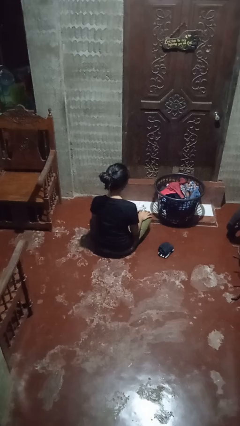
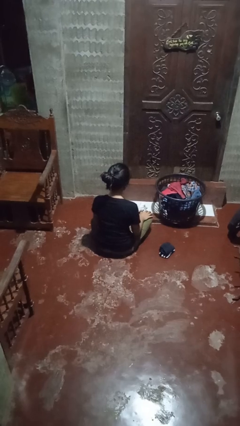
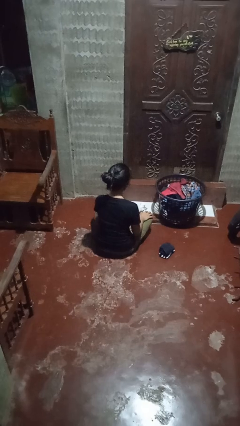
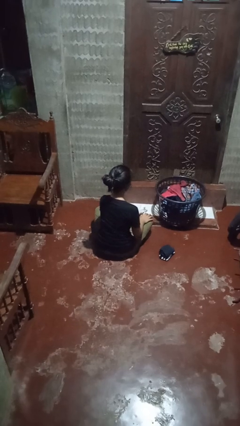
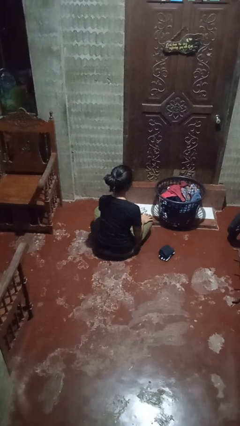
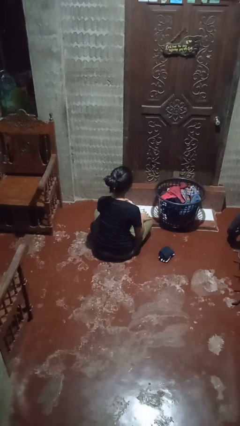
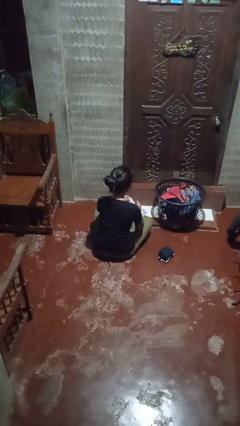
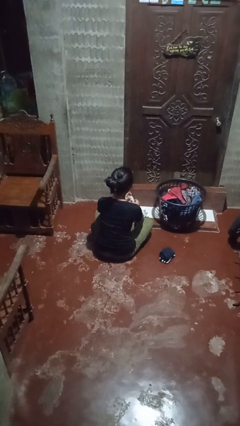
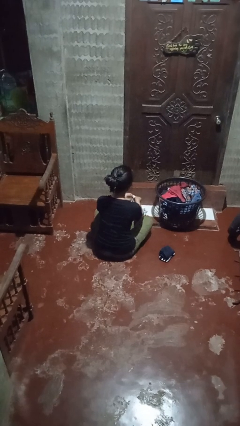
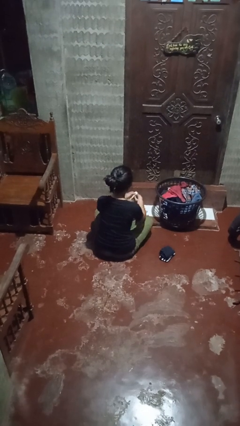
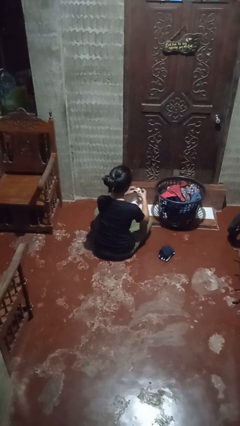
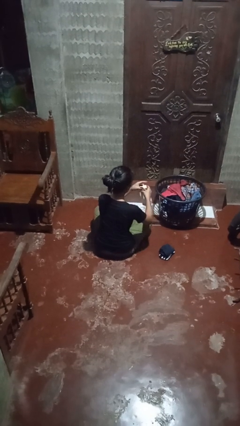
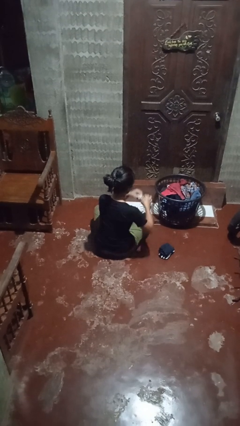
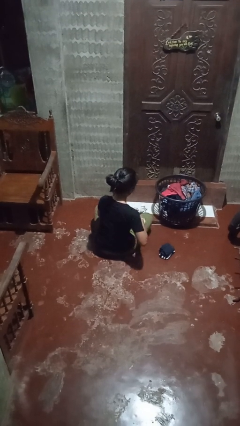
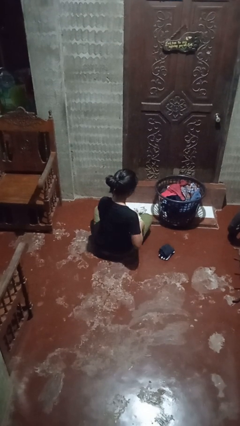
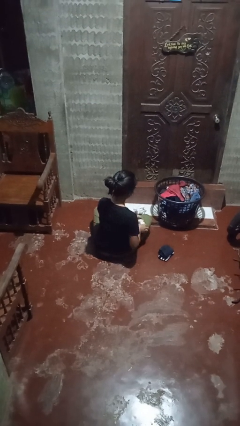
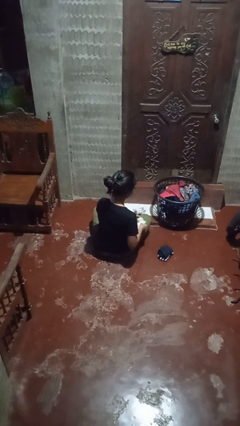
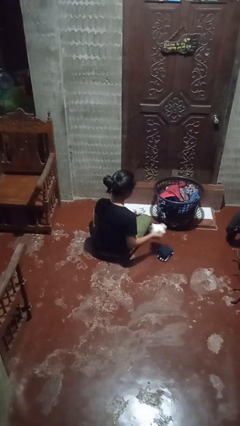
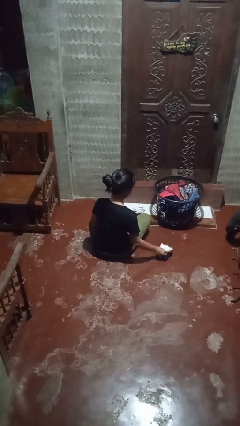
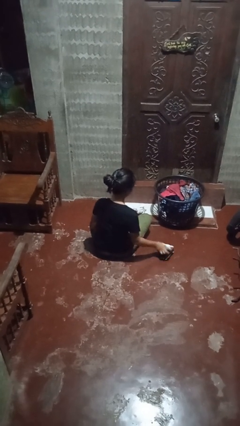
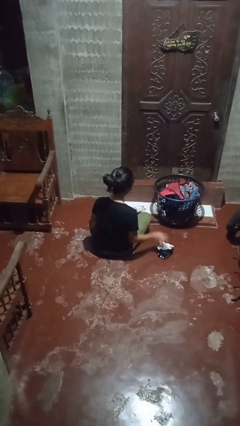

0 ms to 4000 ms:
person folds socks

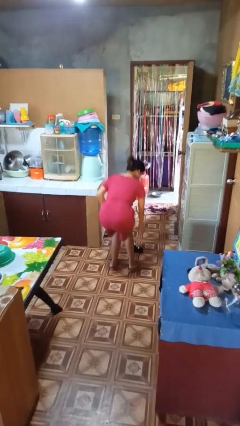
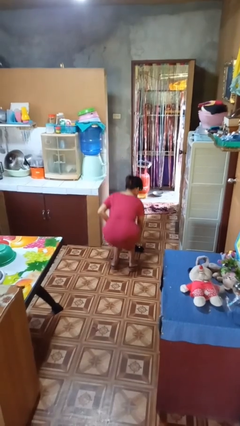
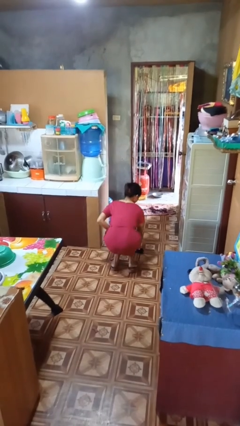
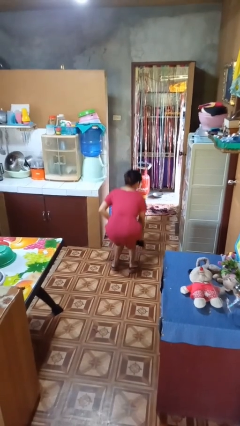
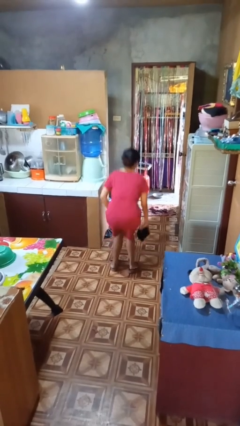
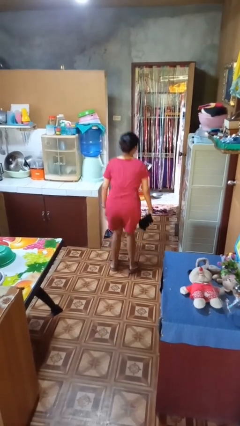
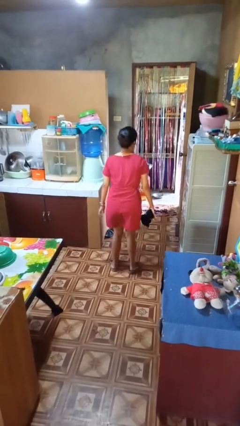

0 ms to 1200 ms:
person picks up object from floor

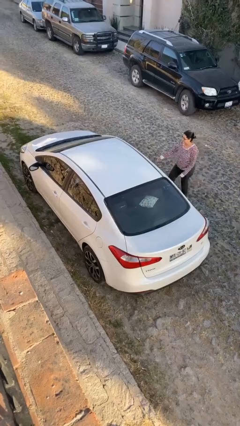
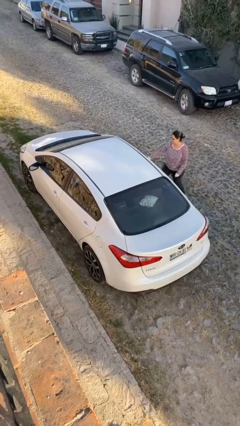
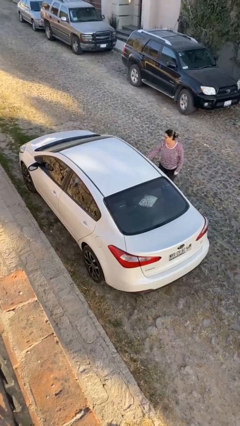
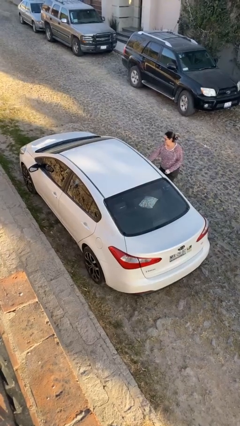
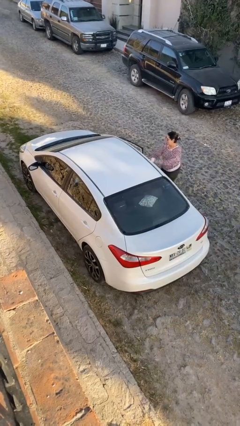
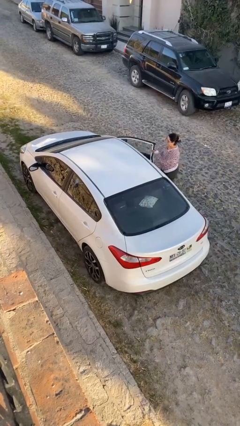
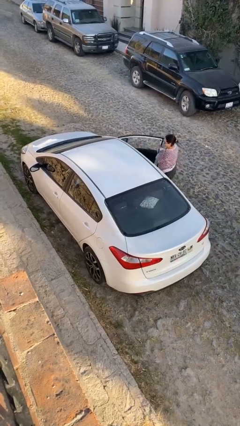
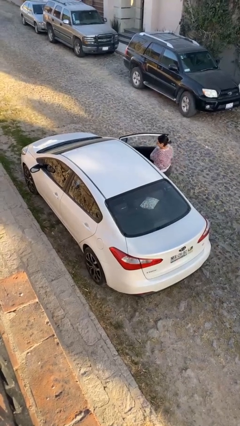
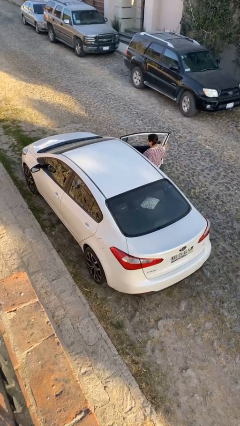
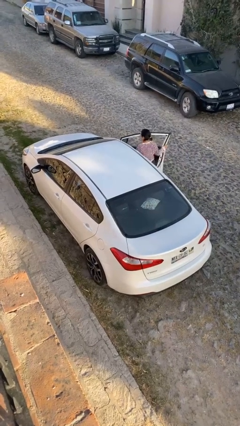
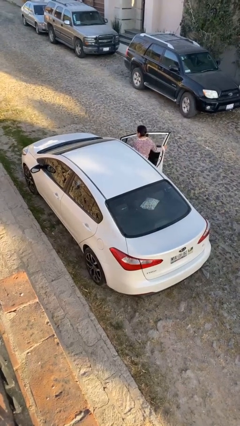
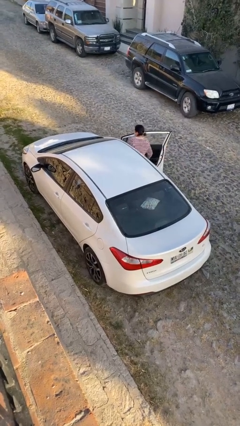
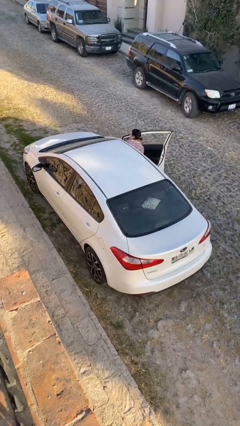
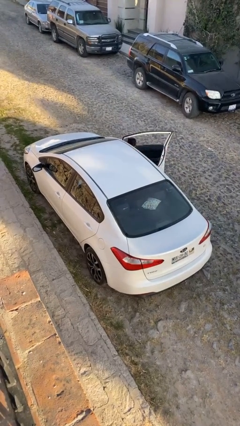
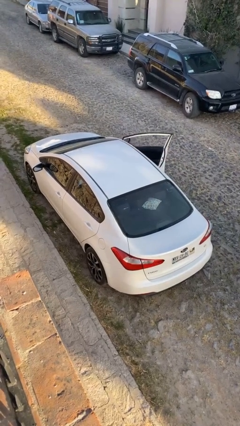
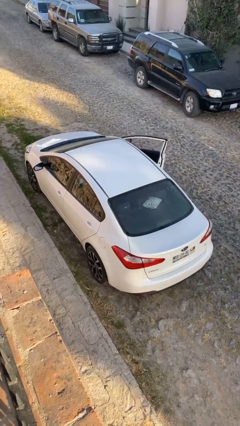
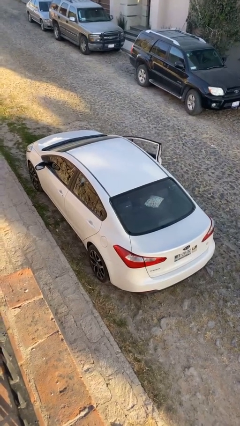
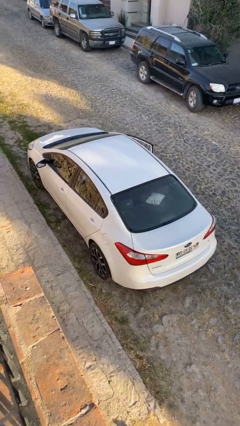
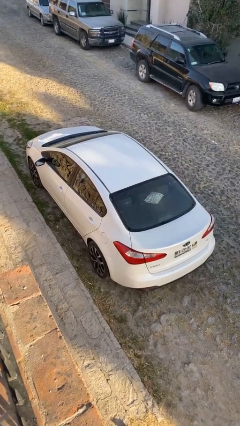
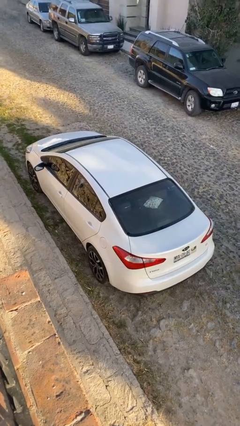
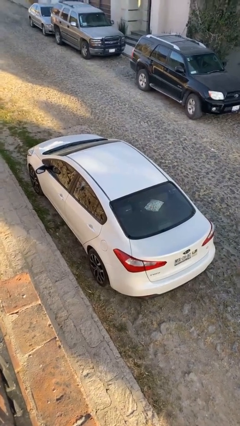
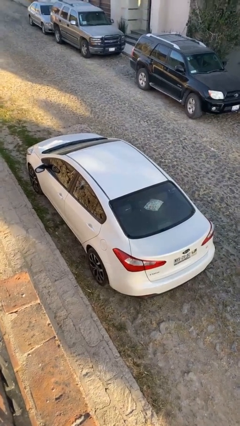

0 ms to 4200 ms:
car picks up person

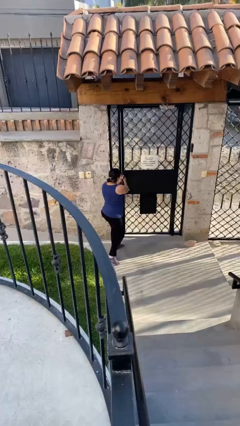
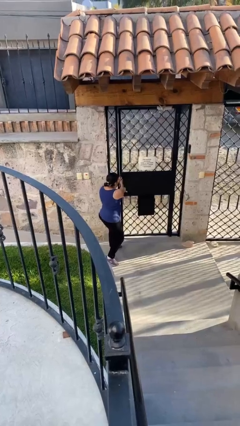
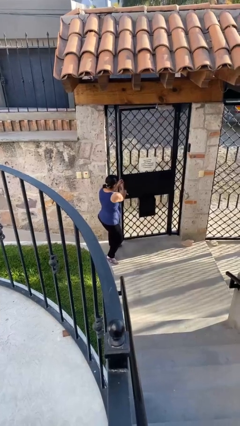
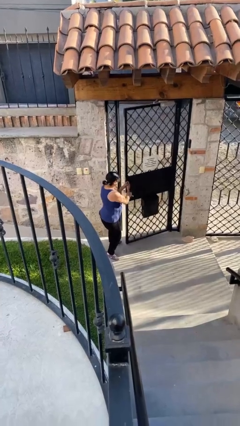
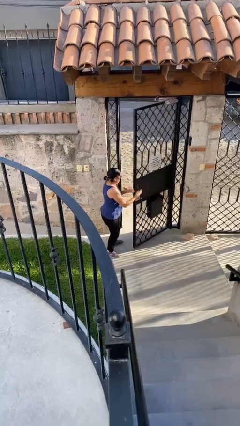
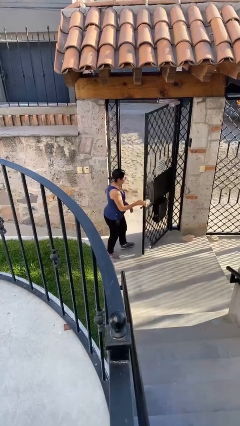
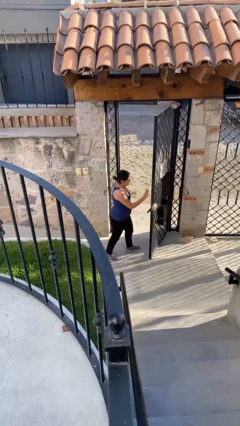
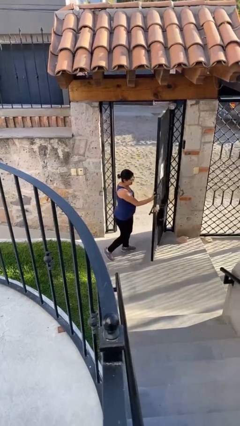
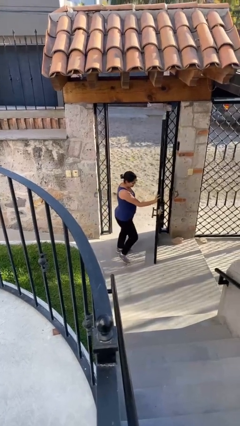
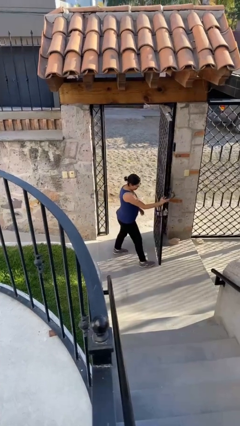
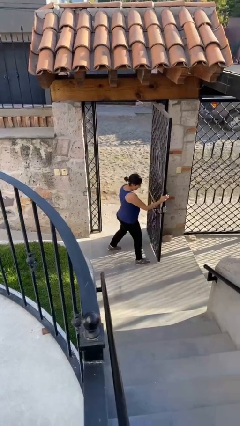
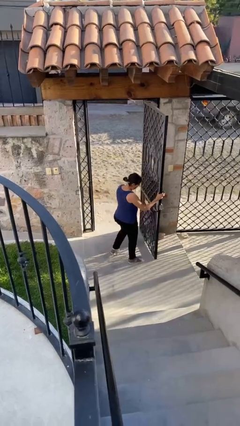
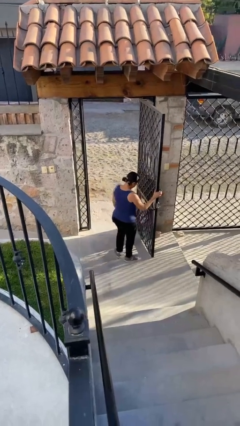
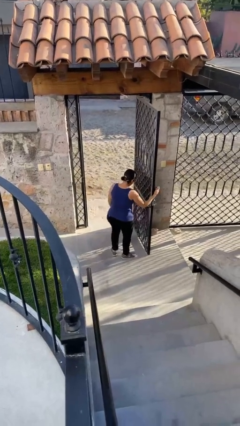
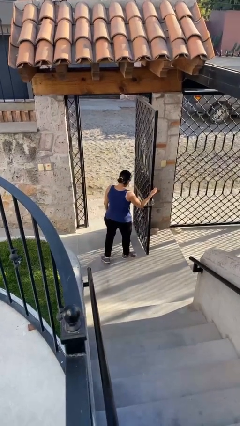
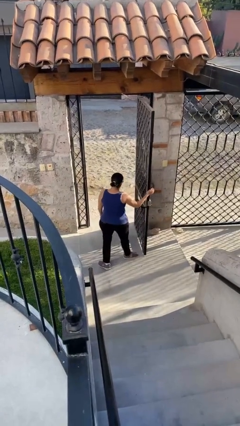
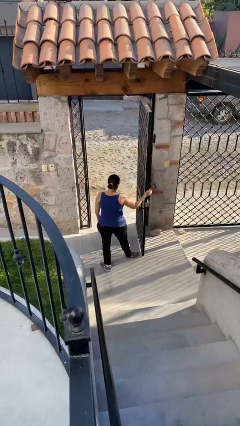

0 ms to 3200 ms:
person opens facility door

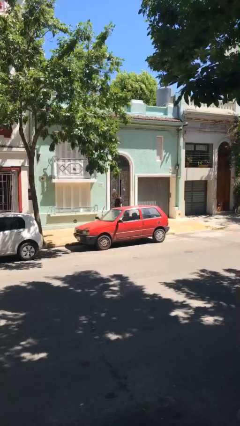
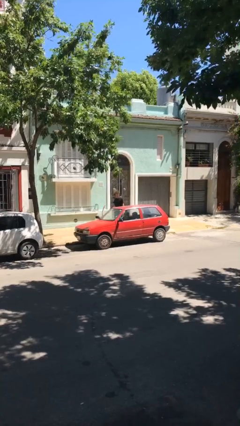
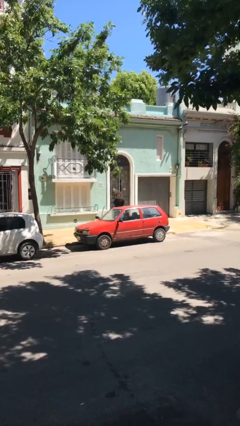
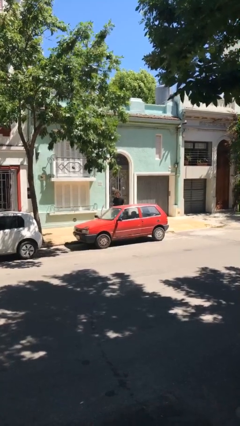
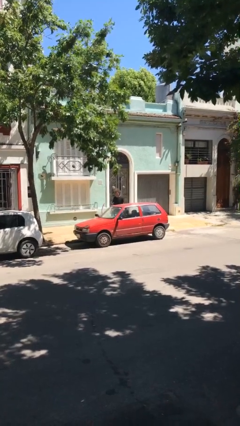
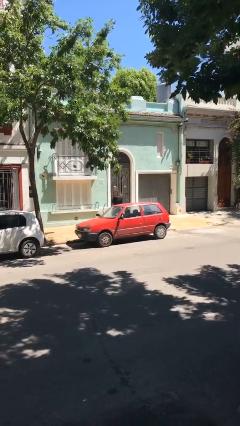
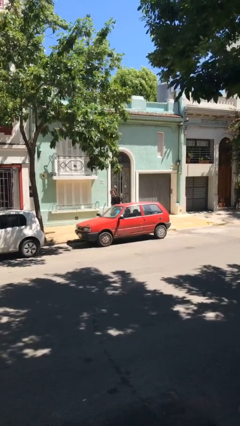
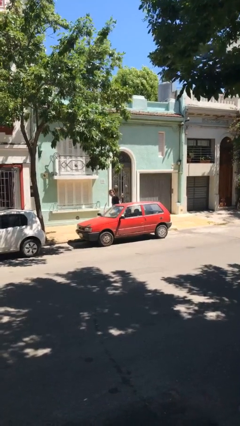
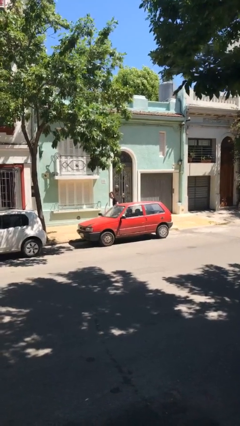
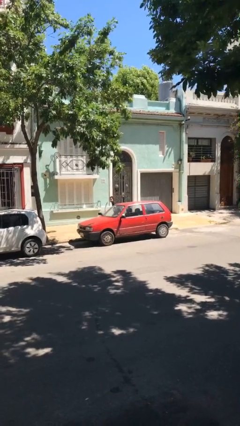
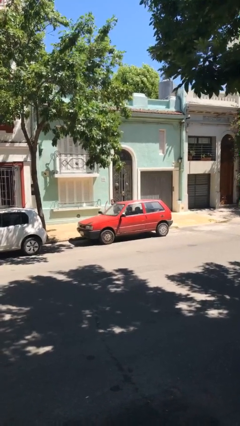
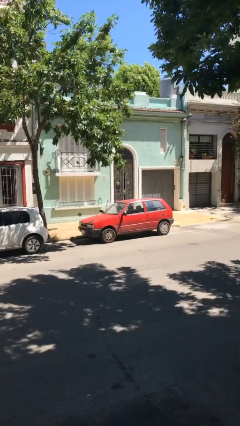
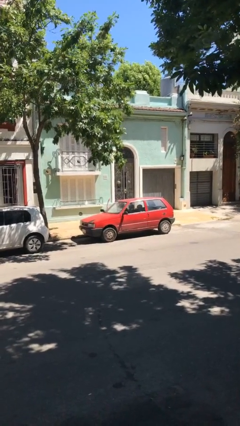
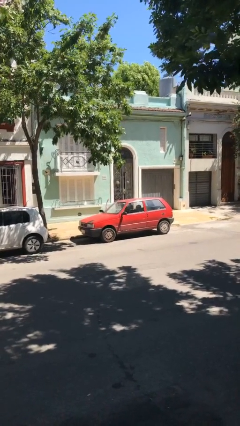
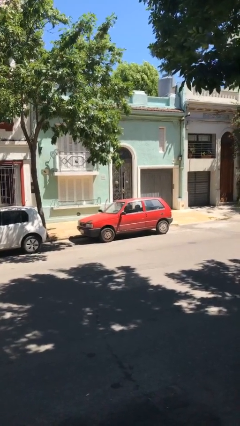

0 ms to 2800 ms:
person enters car

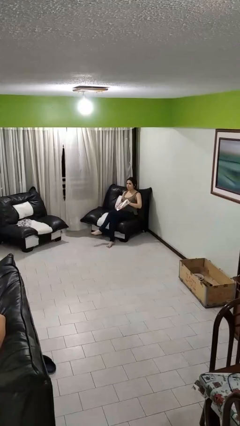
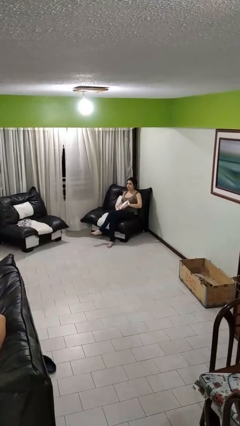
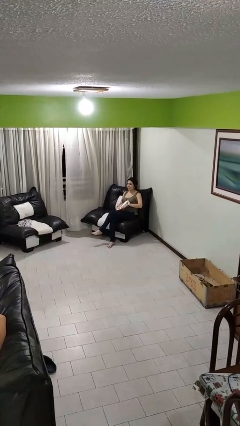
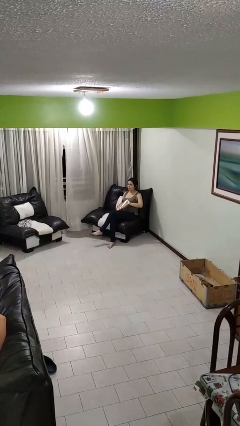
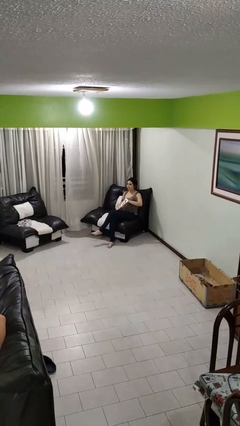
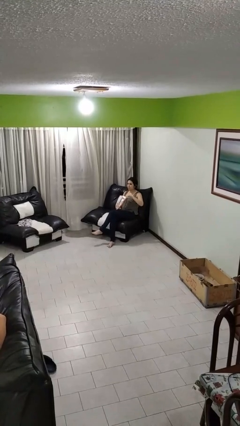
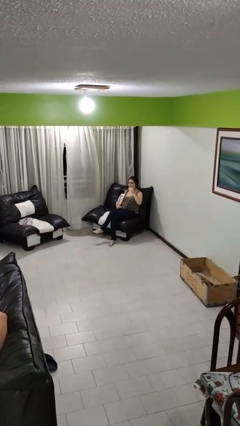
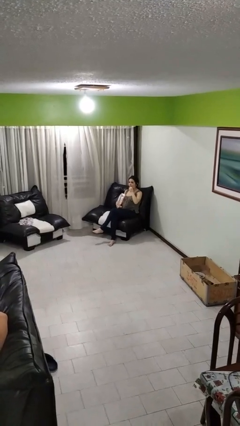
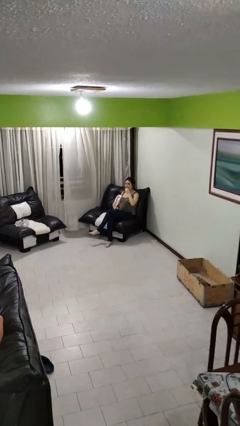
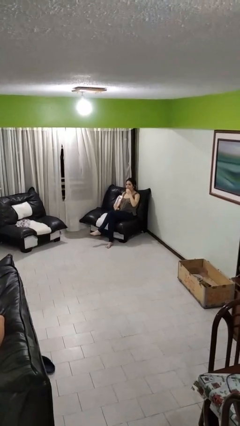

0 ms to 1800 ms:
person eats snack from bag

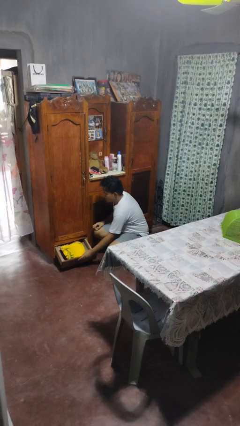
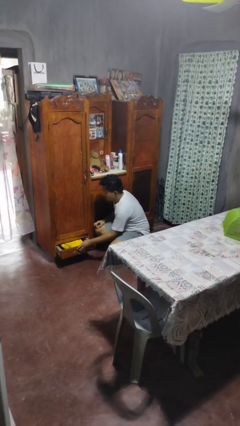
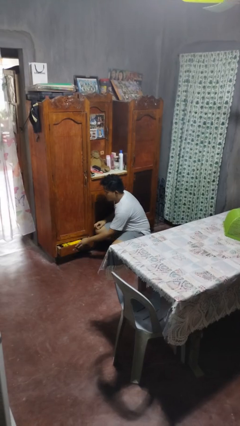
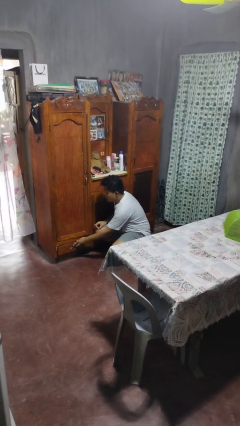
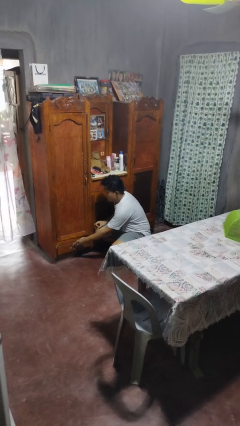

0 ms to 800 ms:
person closes dresser drawer
